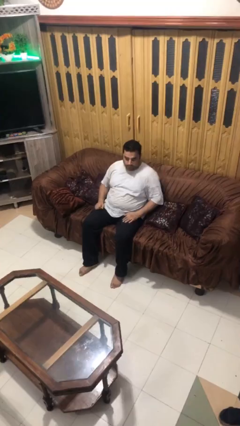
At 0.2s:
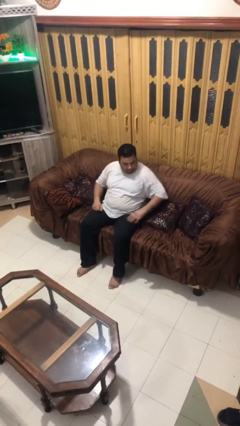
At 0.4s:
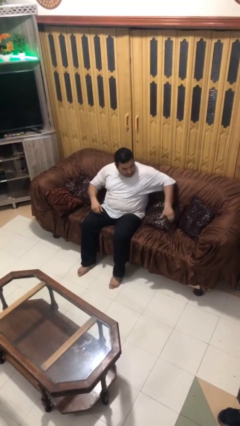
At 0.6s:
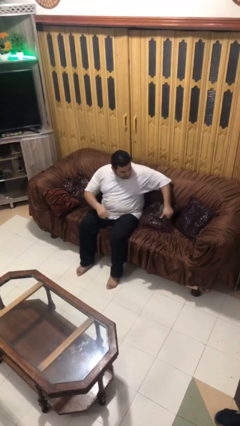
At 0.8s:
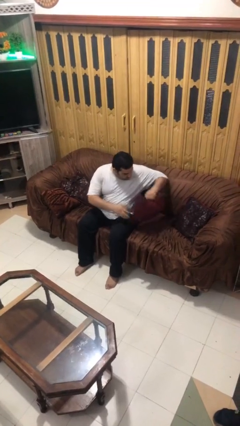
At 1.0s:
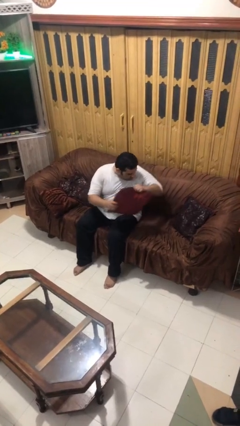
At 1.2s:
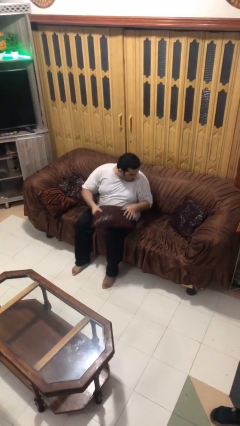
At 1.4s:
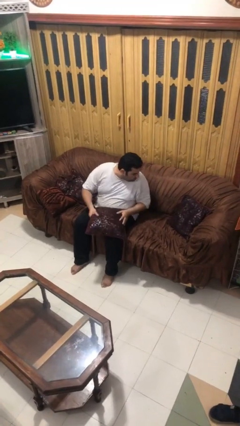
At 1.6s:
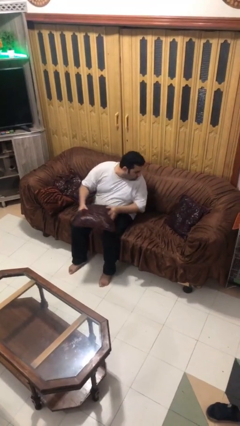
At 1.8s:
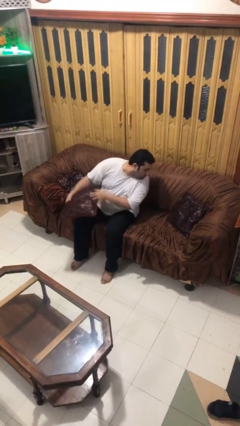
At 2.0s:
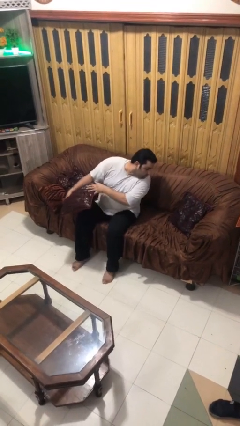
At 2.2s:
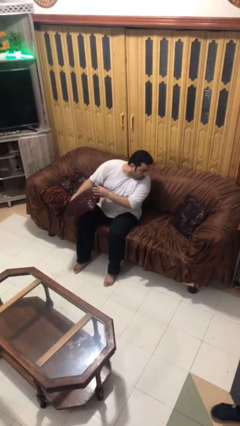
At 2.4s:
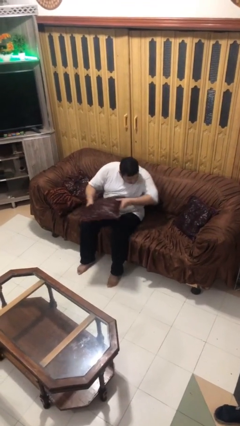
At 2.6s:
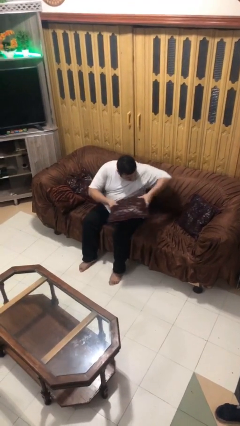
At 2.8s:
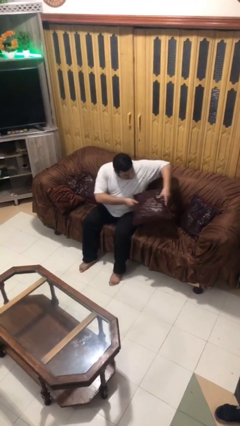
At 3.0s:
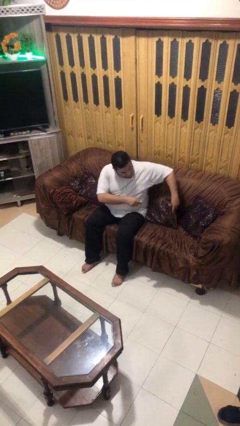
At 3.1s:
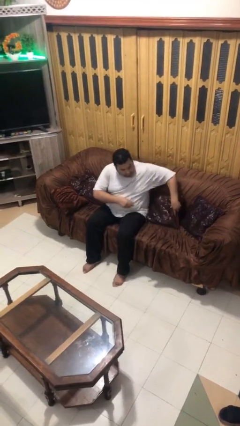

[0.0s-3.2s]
person searches in couch

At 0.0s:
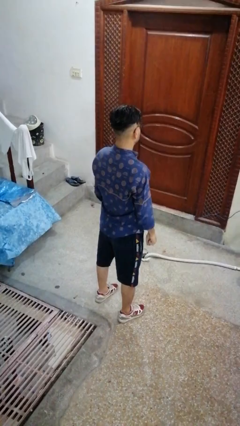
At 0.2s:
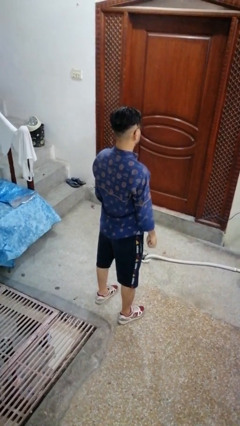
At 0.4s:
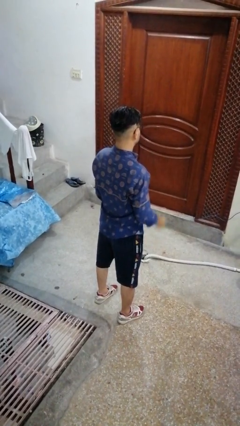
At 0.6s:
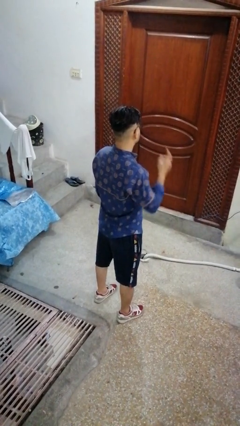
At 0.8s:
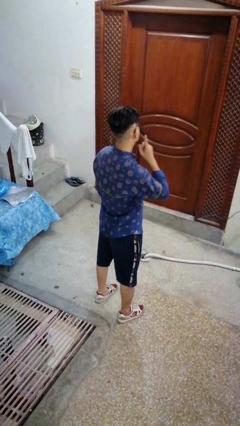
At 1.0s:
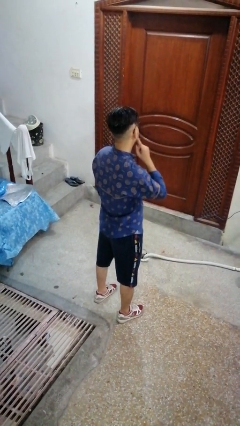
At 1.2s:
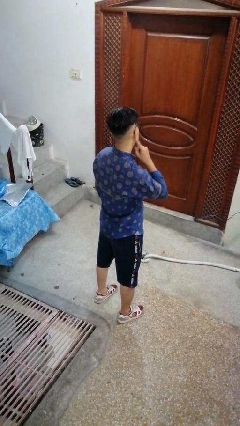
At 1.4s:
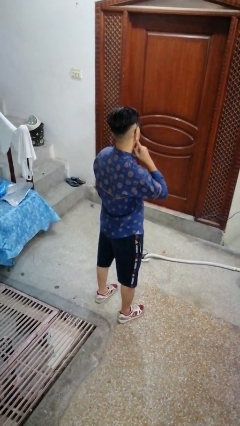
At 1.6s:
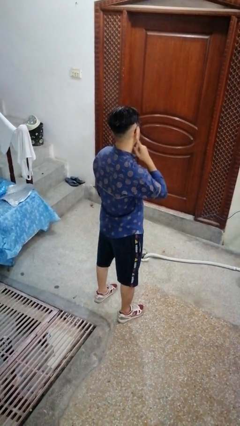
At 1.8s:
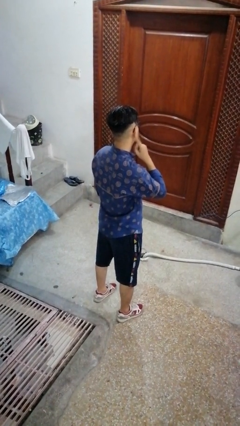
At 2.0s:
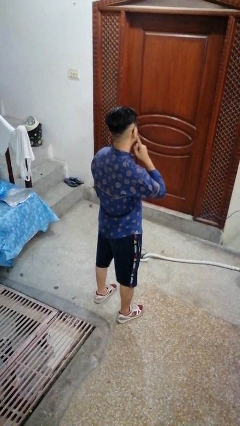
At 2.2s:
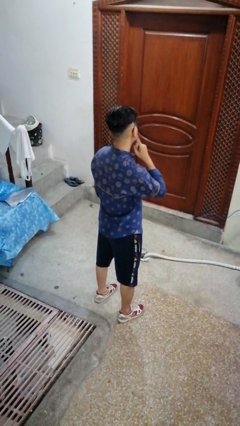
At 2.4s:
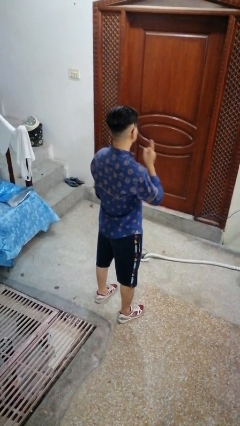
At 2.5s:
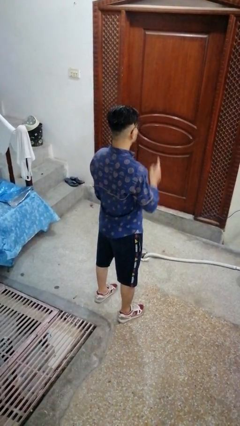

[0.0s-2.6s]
person gestures listen closely

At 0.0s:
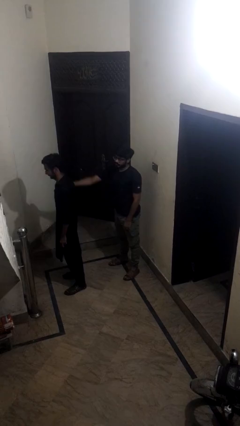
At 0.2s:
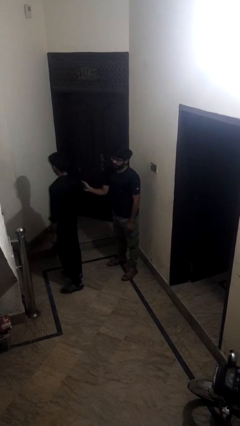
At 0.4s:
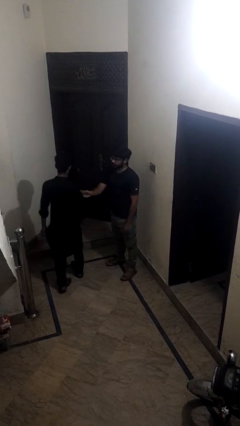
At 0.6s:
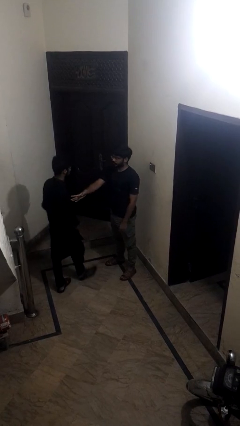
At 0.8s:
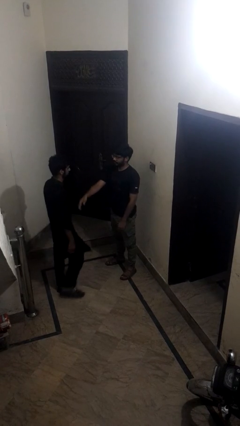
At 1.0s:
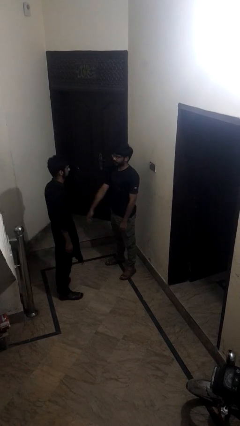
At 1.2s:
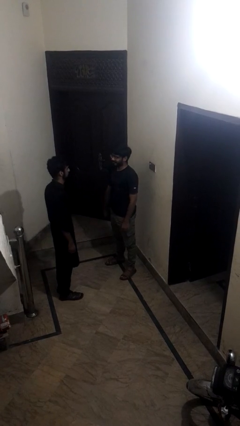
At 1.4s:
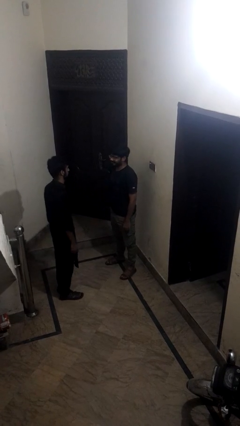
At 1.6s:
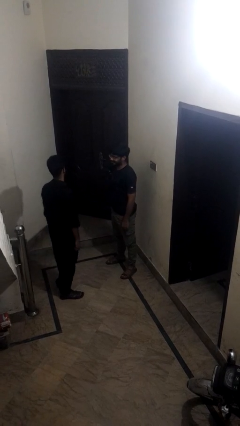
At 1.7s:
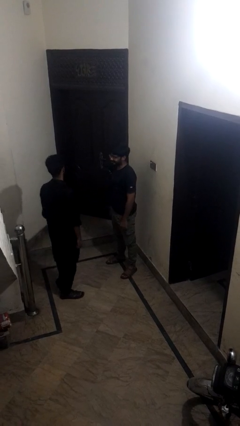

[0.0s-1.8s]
person spins person around

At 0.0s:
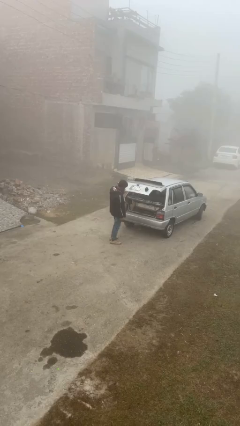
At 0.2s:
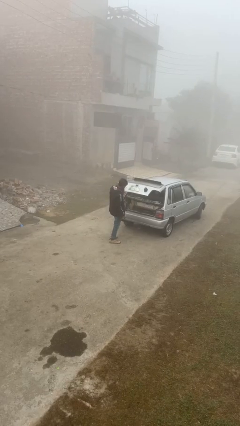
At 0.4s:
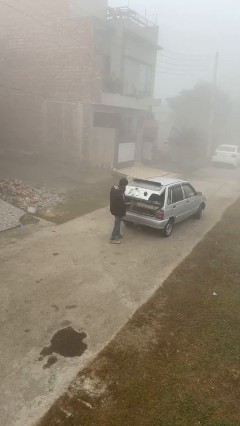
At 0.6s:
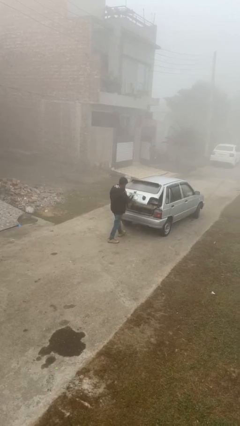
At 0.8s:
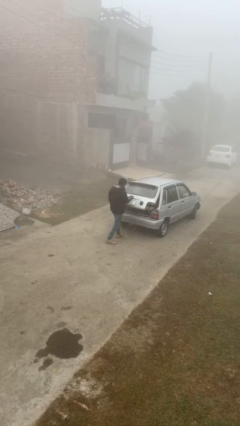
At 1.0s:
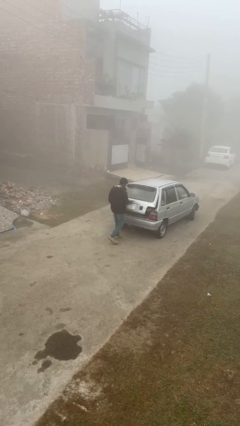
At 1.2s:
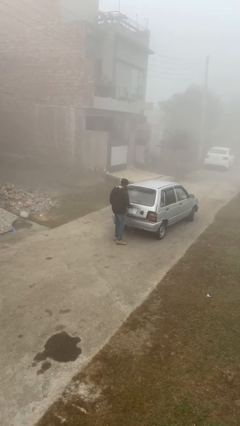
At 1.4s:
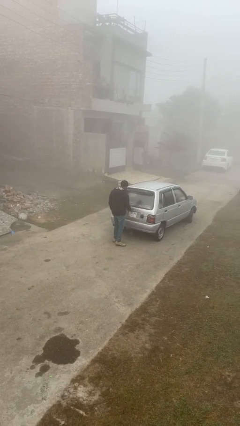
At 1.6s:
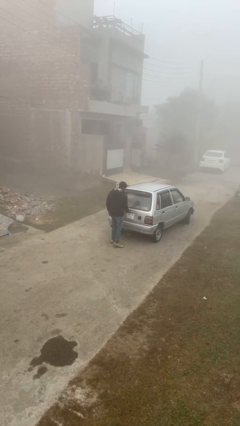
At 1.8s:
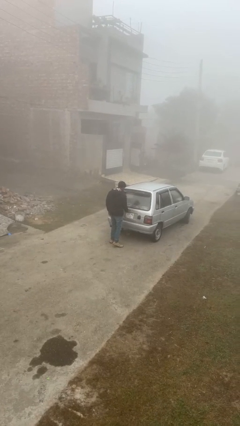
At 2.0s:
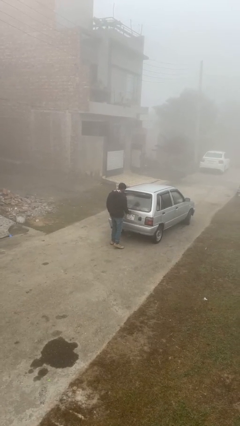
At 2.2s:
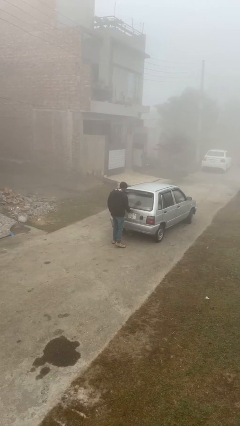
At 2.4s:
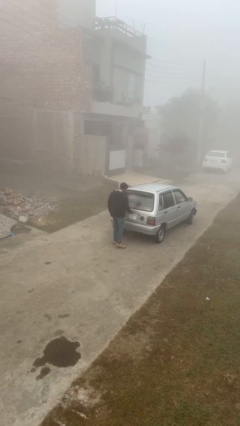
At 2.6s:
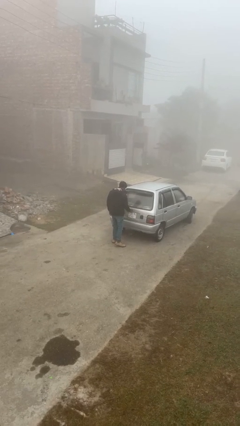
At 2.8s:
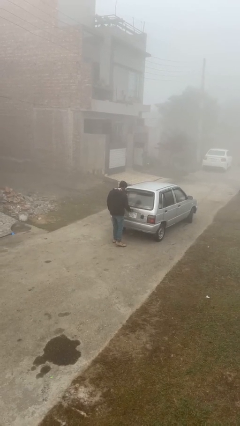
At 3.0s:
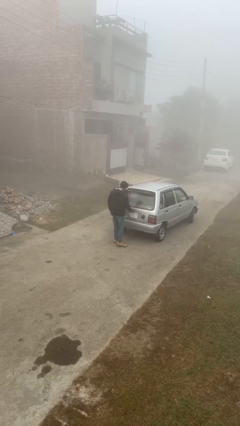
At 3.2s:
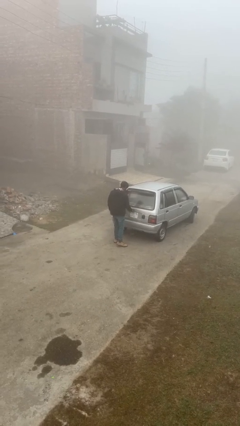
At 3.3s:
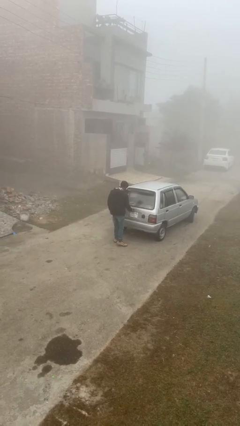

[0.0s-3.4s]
person closes car trunk

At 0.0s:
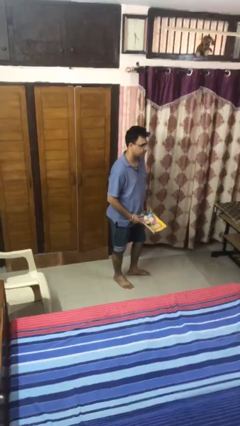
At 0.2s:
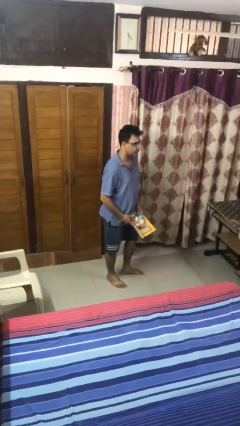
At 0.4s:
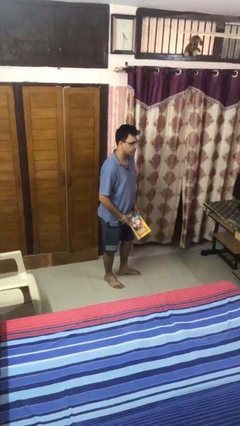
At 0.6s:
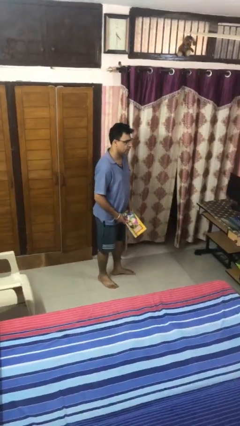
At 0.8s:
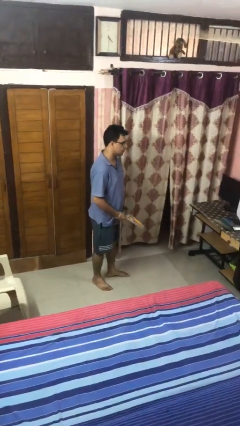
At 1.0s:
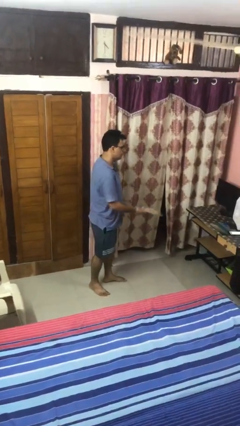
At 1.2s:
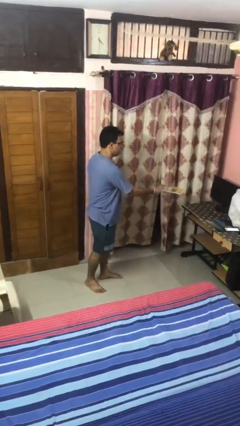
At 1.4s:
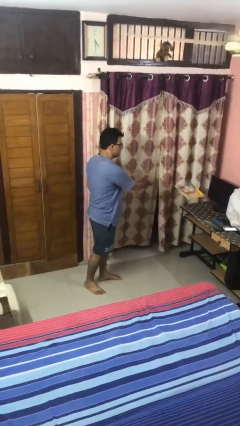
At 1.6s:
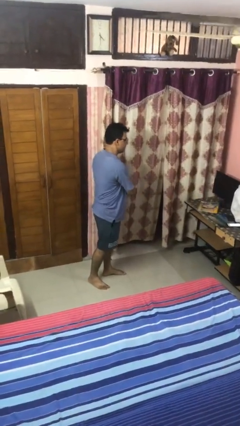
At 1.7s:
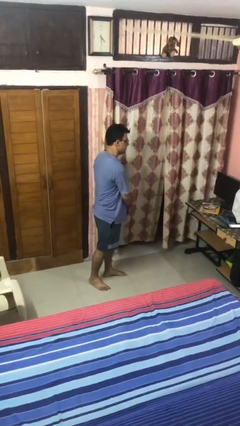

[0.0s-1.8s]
person throws object on table

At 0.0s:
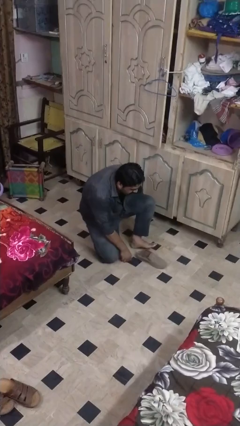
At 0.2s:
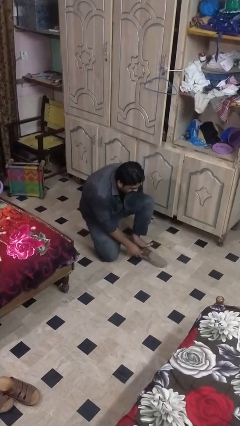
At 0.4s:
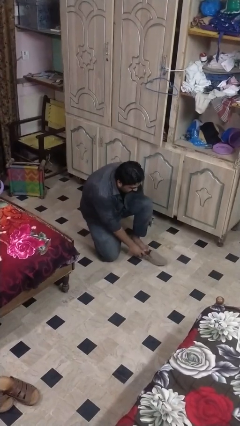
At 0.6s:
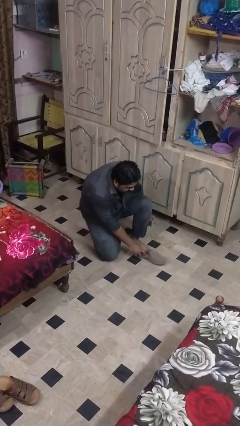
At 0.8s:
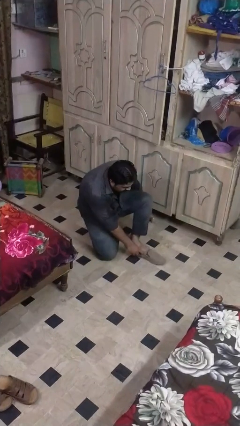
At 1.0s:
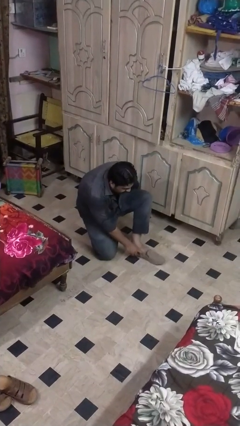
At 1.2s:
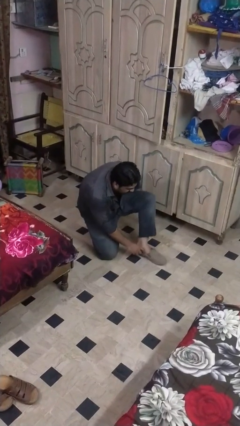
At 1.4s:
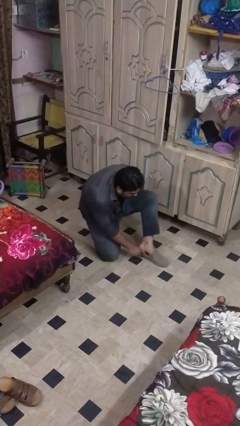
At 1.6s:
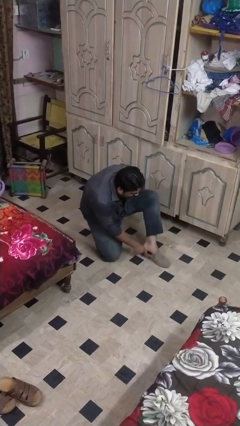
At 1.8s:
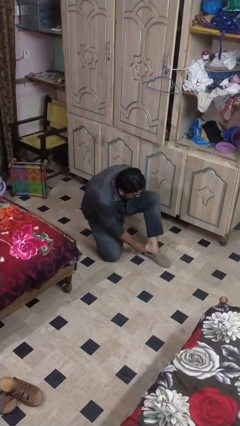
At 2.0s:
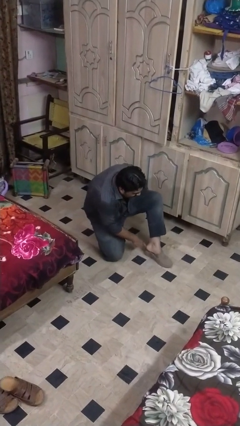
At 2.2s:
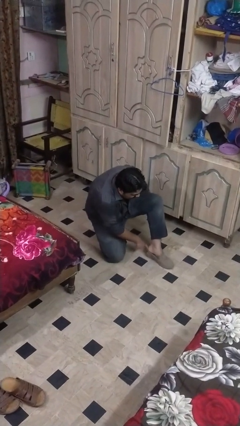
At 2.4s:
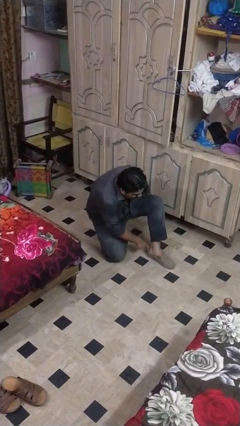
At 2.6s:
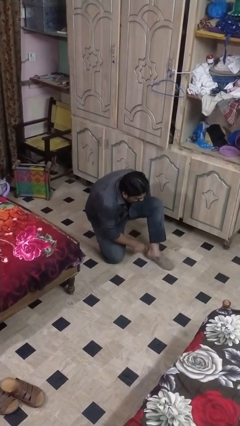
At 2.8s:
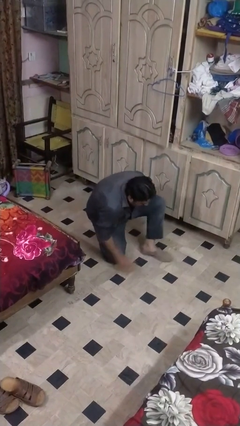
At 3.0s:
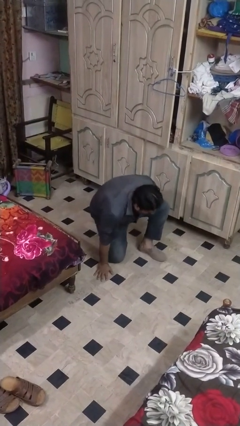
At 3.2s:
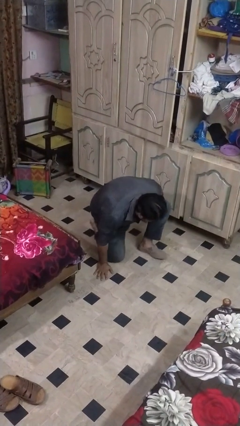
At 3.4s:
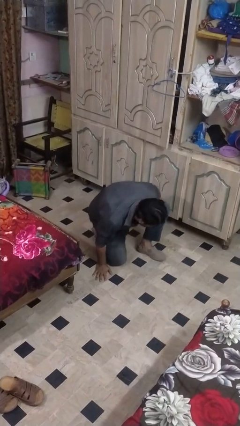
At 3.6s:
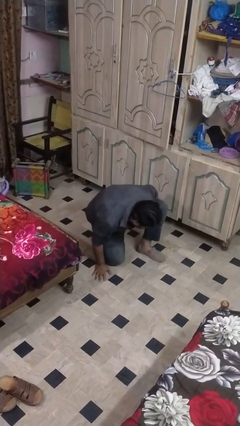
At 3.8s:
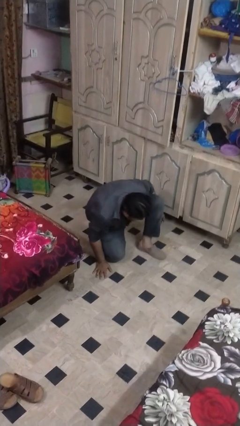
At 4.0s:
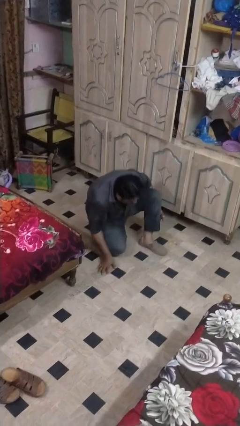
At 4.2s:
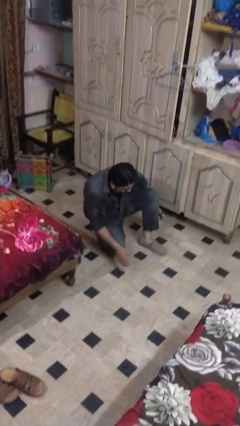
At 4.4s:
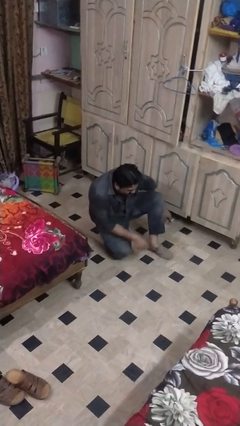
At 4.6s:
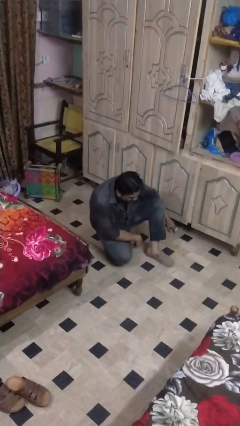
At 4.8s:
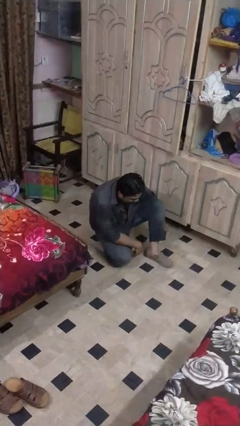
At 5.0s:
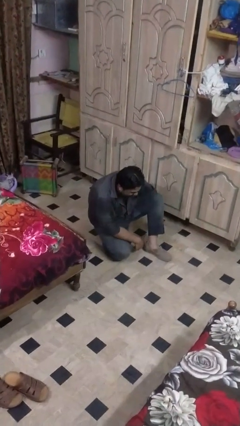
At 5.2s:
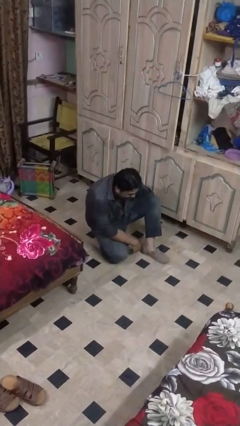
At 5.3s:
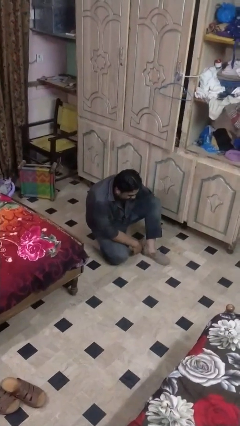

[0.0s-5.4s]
person puts on boots
